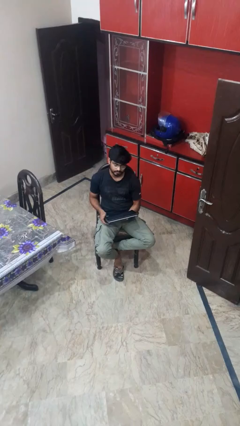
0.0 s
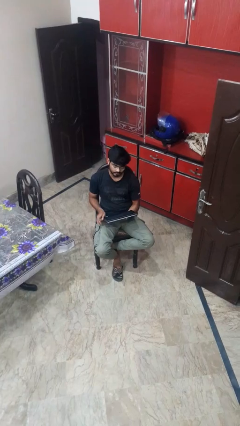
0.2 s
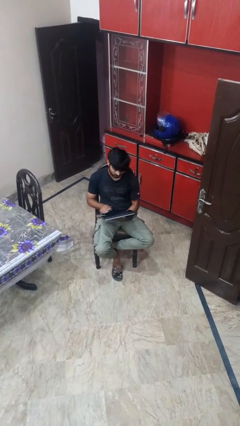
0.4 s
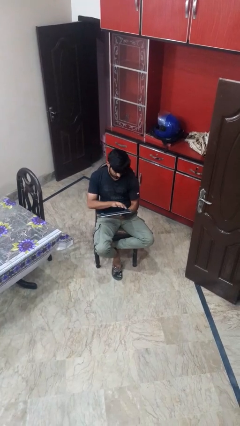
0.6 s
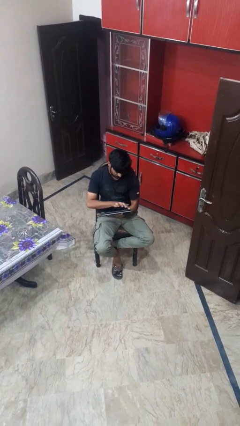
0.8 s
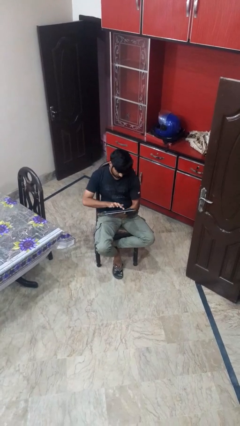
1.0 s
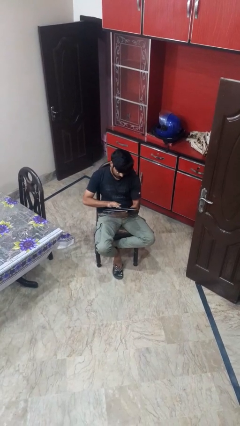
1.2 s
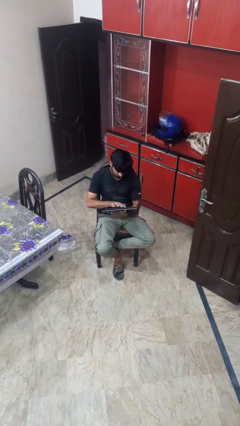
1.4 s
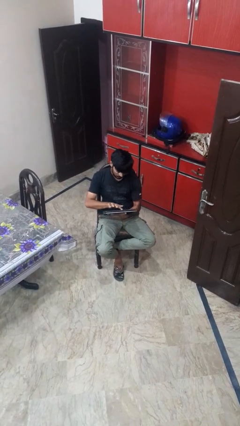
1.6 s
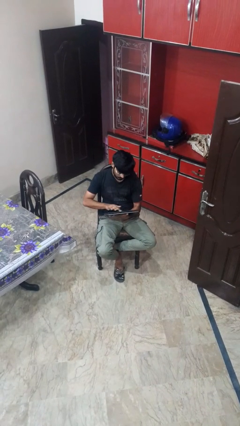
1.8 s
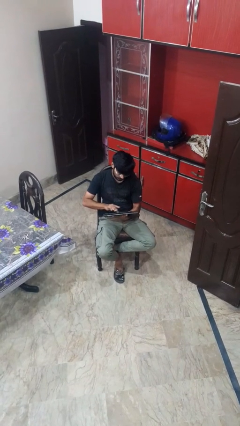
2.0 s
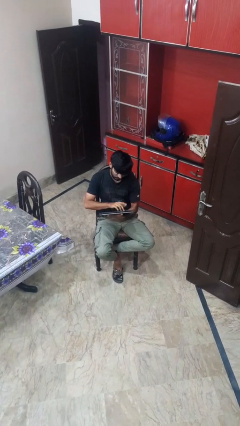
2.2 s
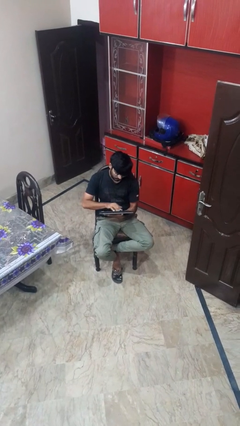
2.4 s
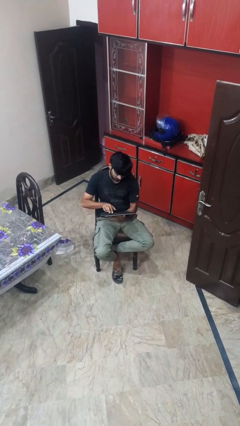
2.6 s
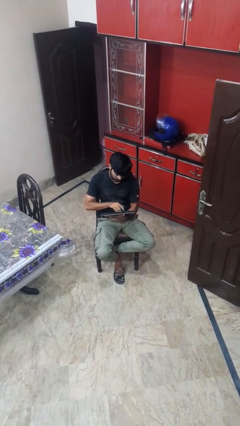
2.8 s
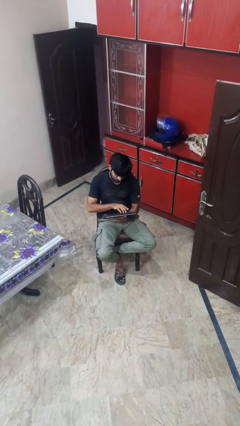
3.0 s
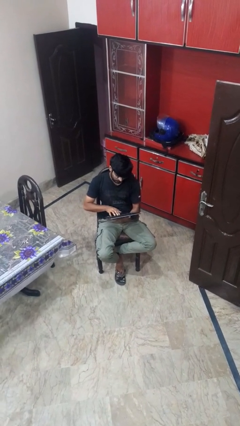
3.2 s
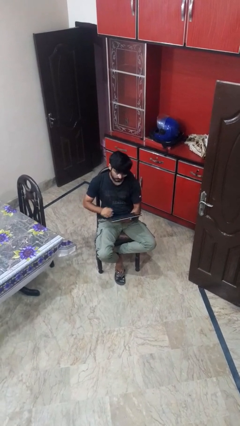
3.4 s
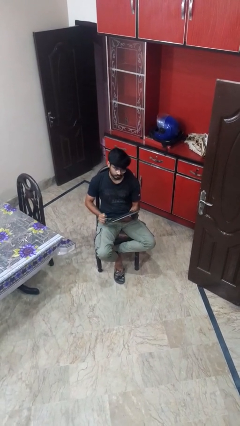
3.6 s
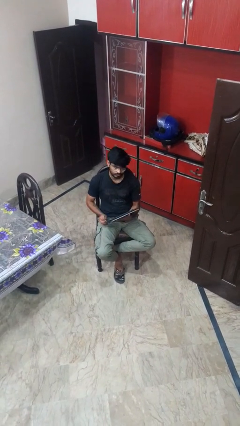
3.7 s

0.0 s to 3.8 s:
person interacts with tablet

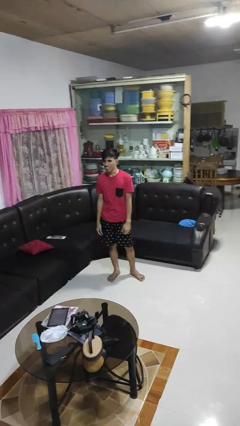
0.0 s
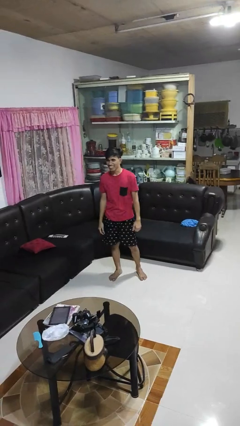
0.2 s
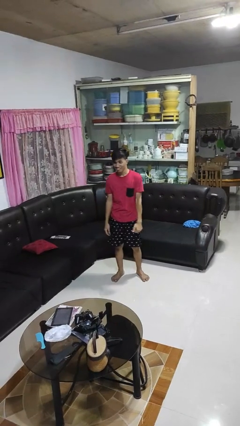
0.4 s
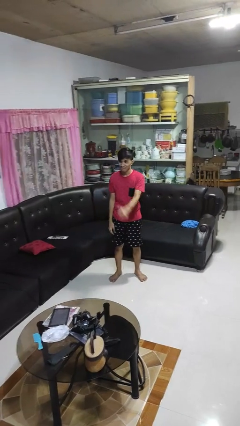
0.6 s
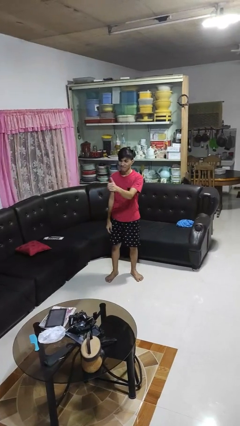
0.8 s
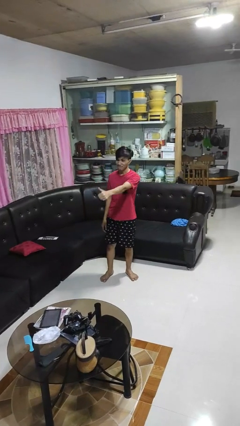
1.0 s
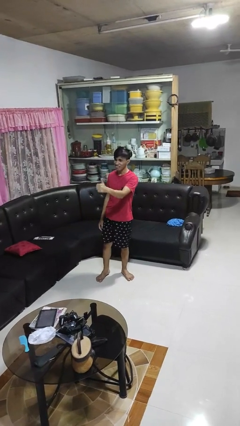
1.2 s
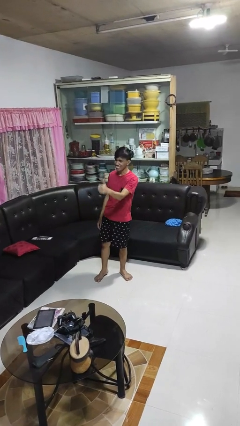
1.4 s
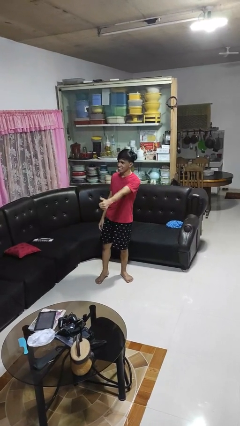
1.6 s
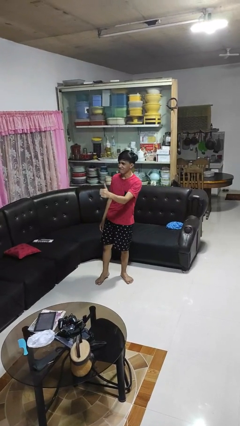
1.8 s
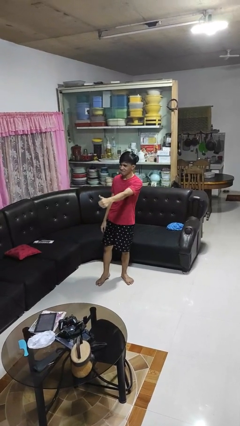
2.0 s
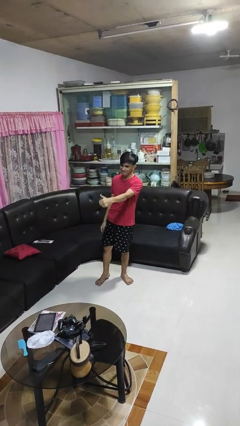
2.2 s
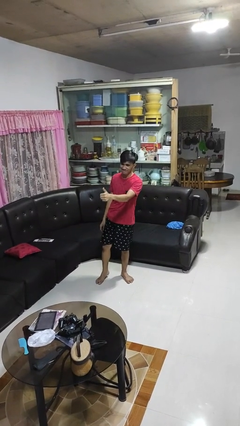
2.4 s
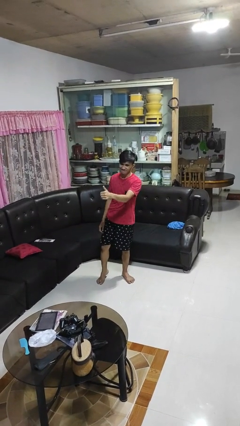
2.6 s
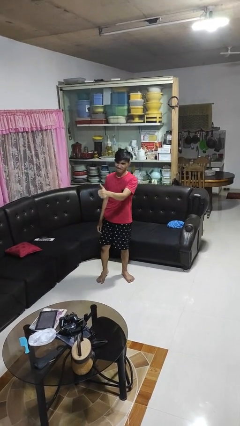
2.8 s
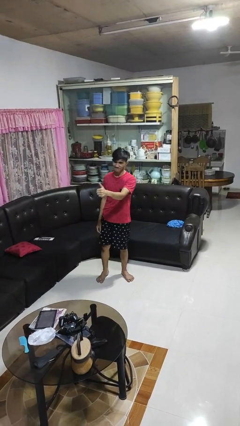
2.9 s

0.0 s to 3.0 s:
person gestures thumbs up

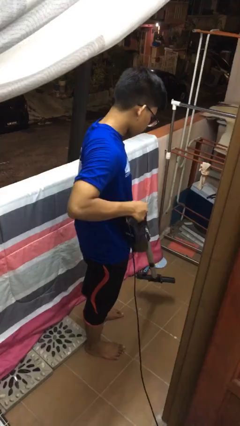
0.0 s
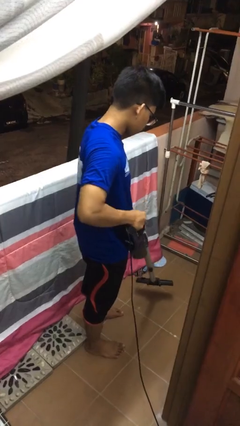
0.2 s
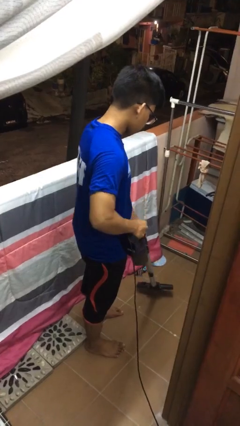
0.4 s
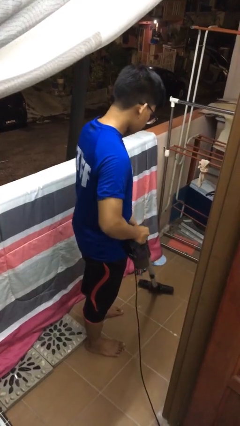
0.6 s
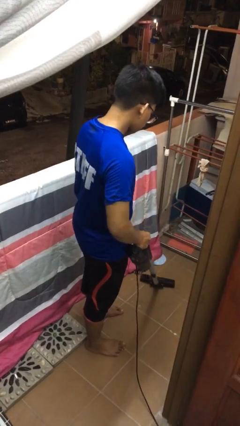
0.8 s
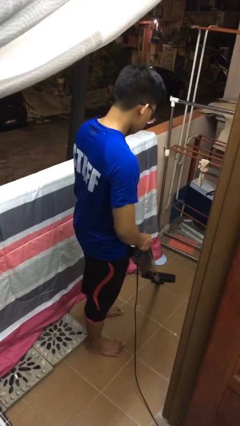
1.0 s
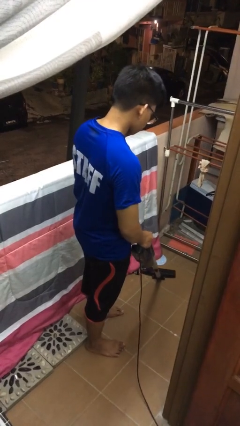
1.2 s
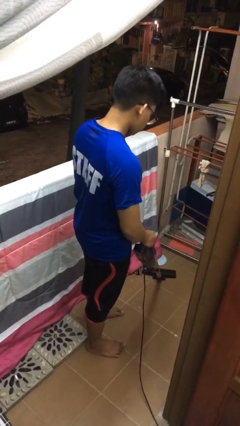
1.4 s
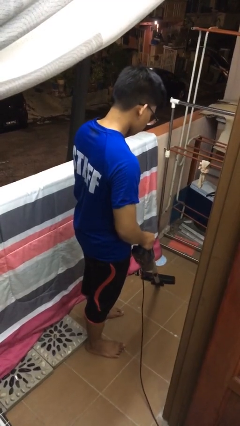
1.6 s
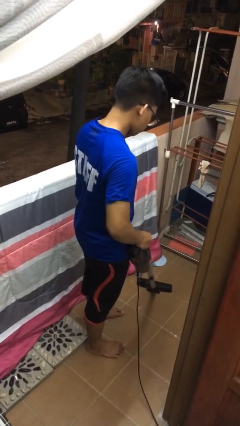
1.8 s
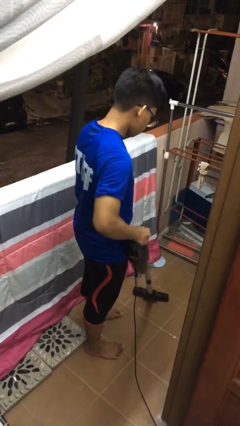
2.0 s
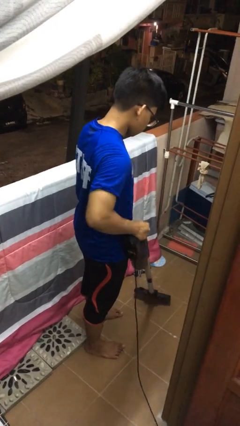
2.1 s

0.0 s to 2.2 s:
person vacuums carpet

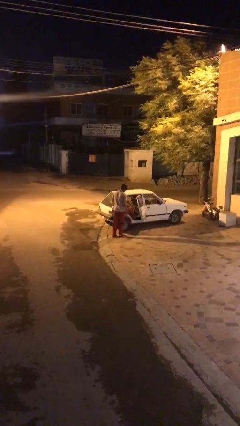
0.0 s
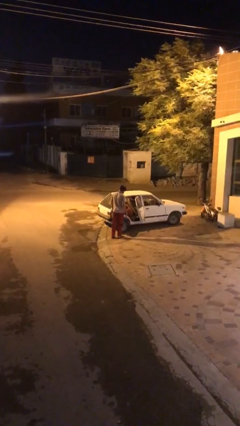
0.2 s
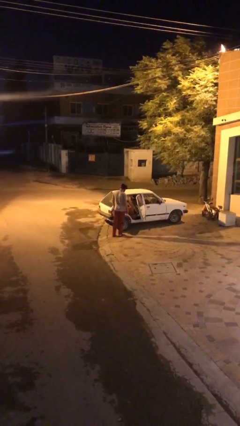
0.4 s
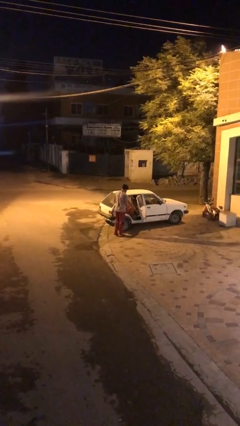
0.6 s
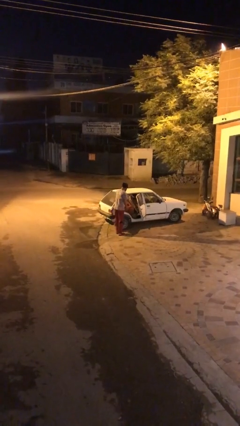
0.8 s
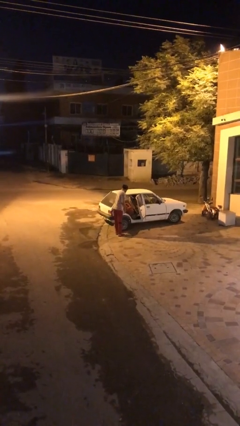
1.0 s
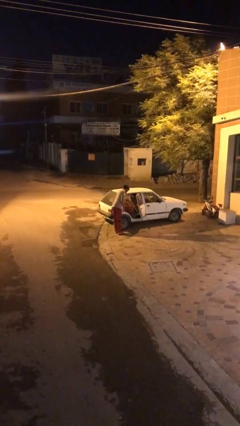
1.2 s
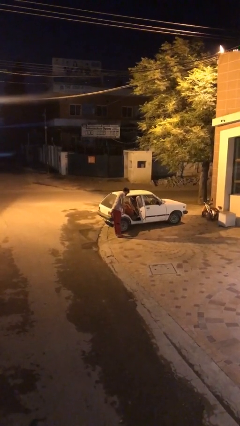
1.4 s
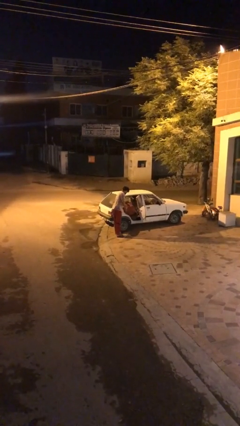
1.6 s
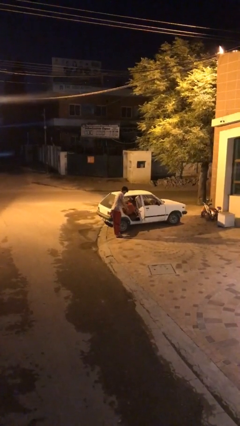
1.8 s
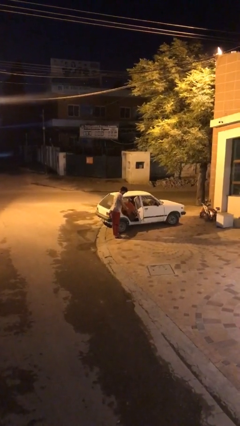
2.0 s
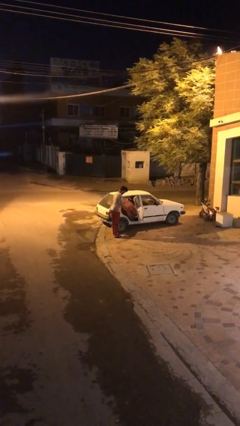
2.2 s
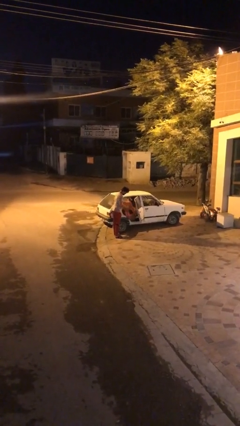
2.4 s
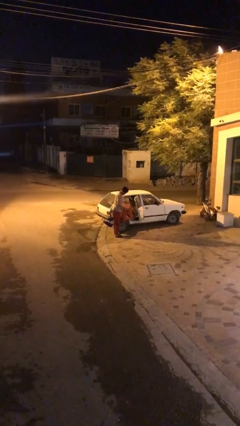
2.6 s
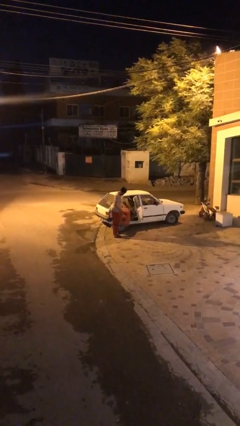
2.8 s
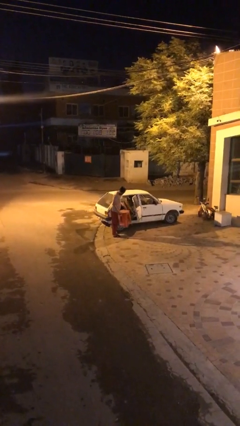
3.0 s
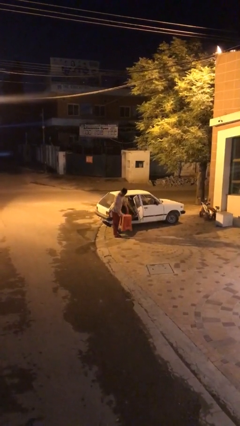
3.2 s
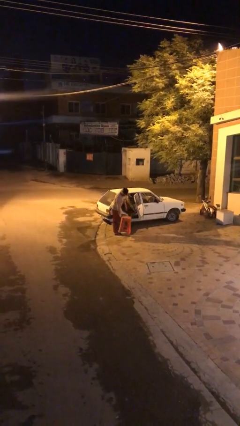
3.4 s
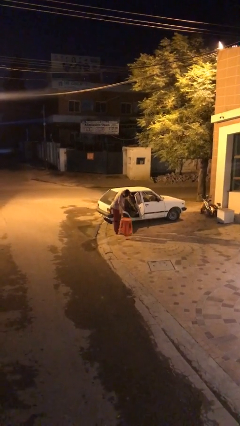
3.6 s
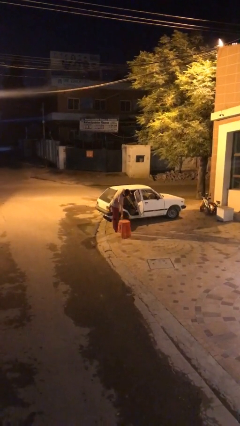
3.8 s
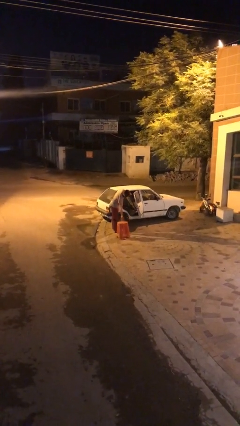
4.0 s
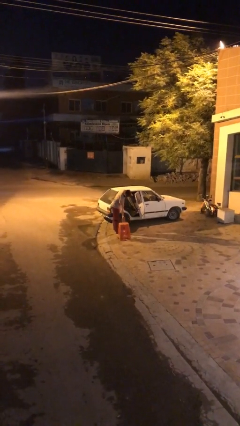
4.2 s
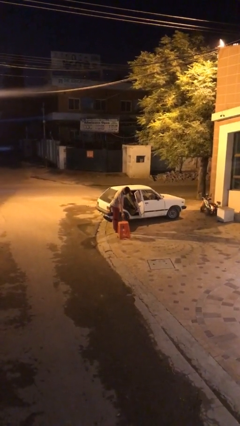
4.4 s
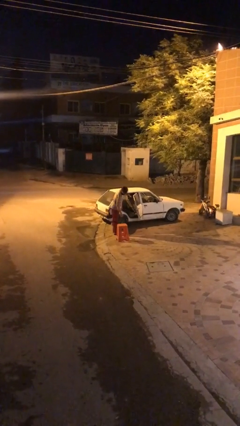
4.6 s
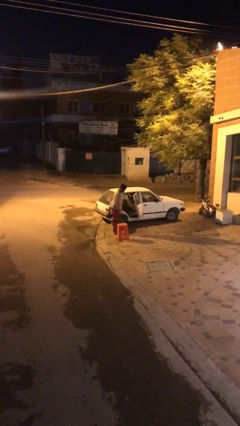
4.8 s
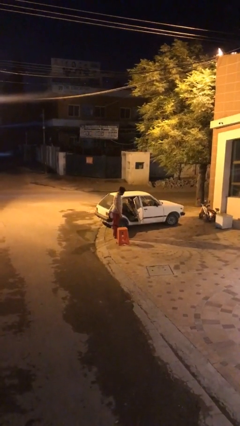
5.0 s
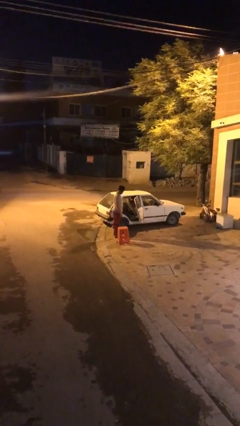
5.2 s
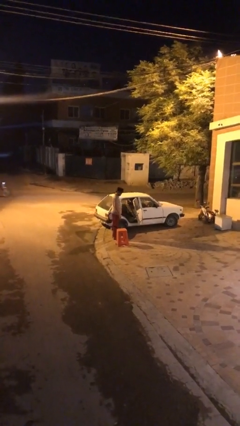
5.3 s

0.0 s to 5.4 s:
person unloads car

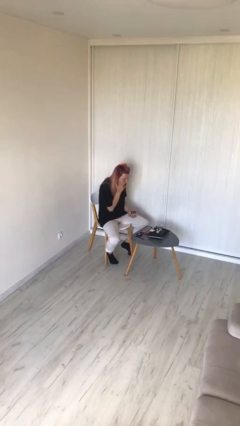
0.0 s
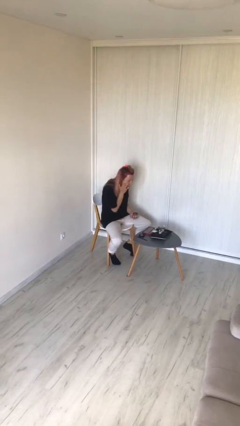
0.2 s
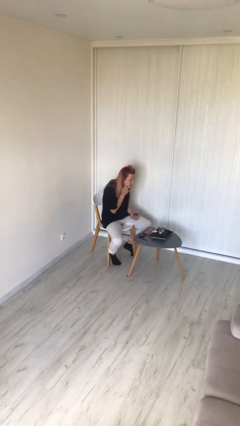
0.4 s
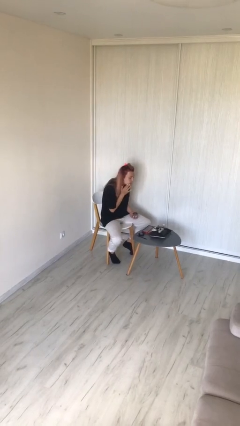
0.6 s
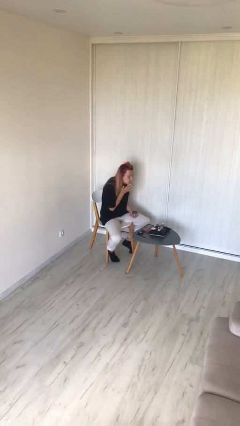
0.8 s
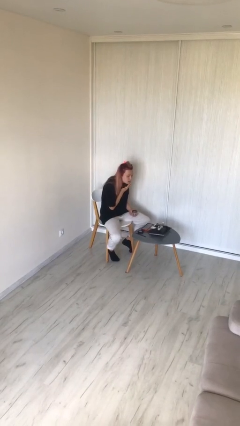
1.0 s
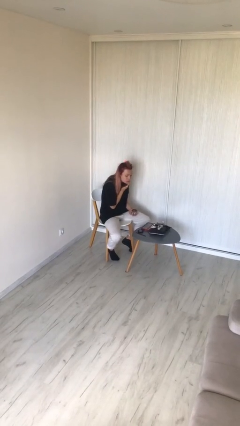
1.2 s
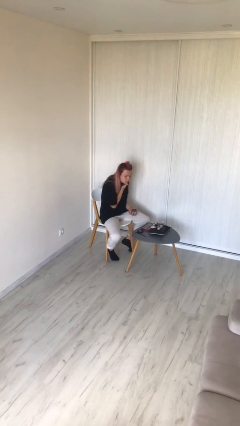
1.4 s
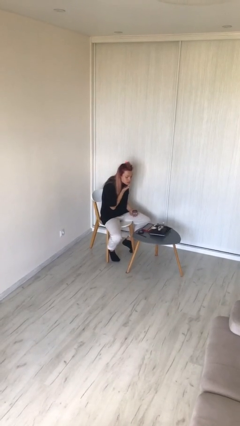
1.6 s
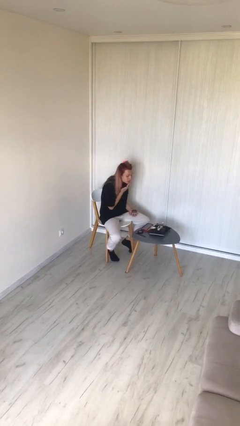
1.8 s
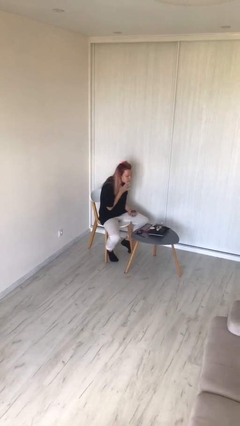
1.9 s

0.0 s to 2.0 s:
person applies foundation makeup

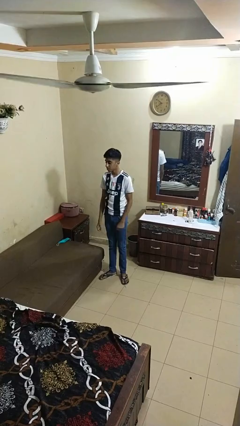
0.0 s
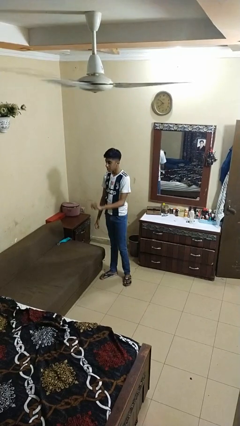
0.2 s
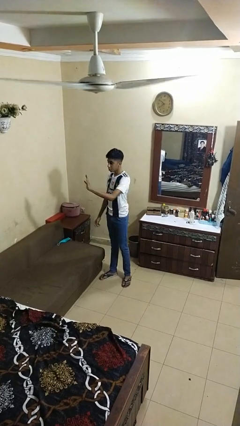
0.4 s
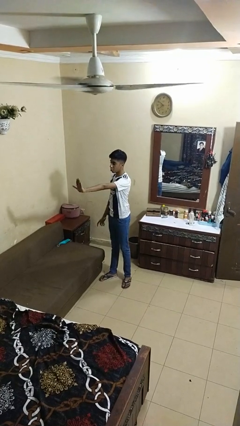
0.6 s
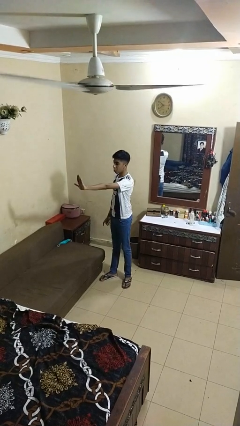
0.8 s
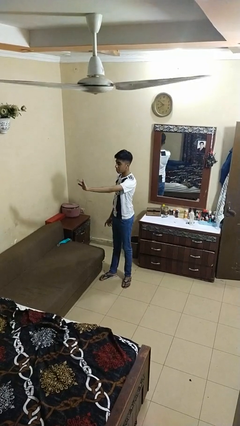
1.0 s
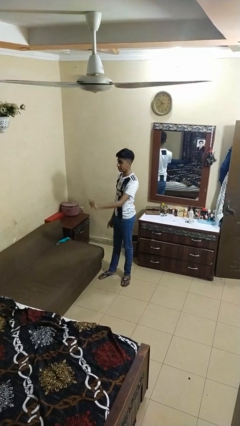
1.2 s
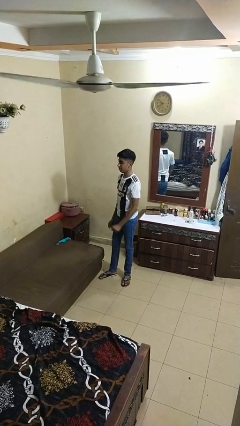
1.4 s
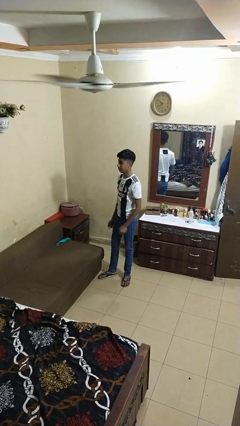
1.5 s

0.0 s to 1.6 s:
person gestures stop
